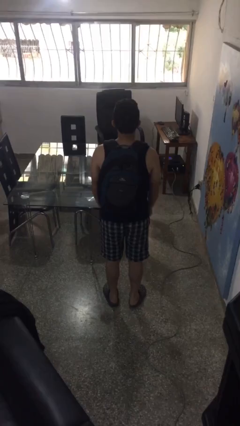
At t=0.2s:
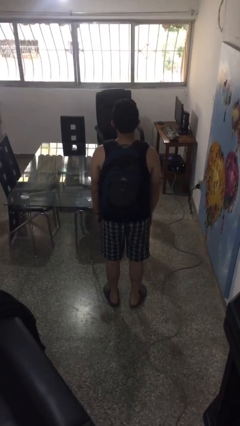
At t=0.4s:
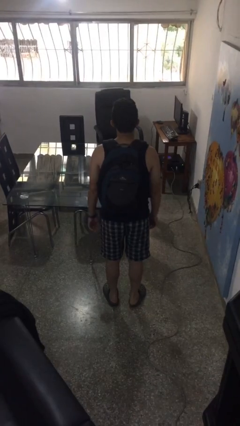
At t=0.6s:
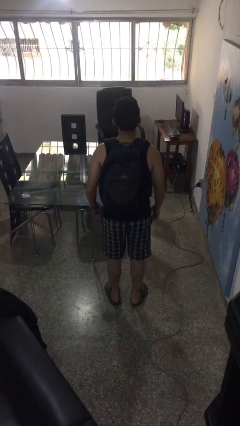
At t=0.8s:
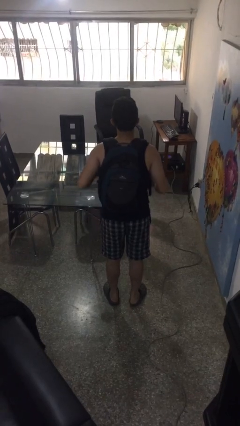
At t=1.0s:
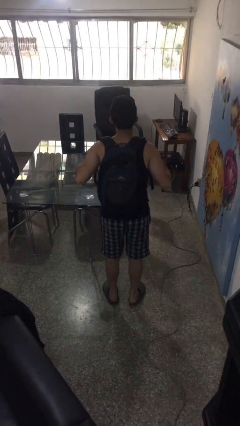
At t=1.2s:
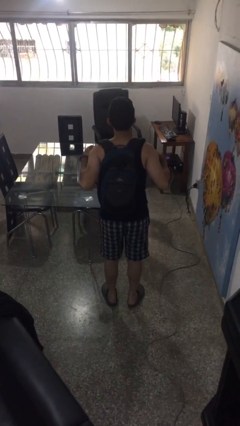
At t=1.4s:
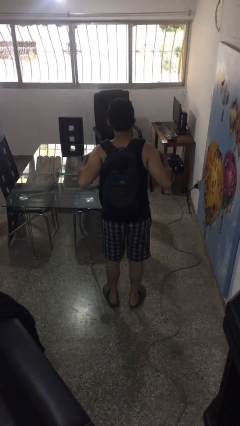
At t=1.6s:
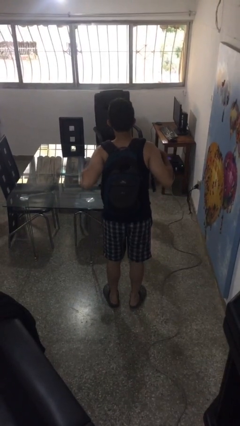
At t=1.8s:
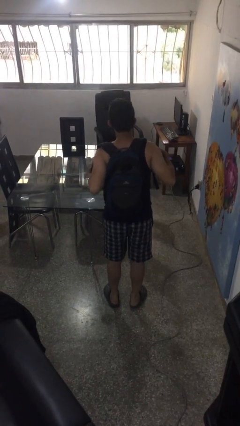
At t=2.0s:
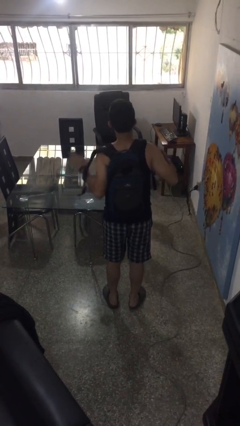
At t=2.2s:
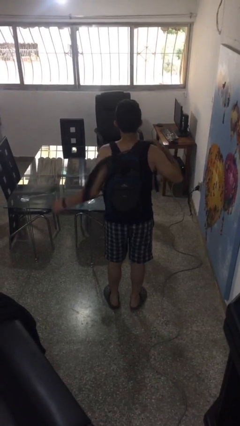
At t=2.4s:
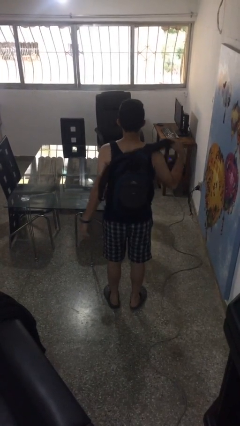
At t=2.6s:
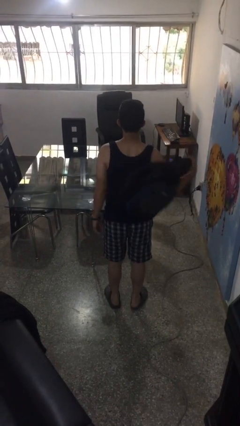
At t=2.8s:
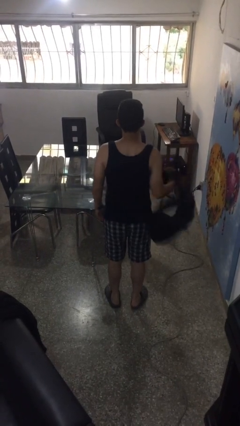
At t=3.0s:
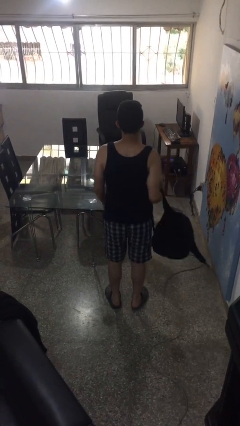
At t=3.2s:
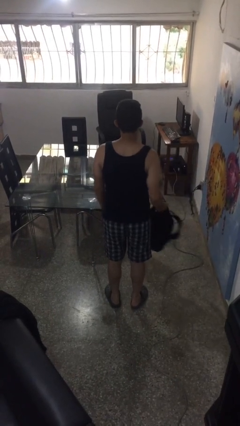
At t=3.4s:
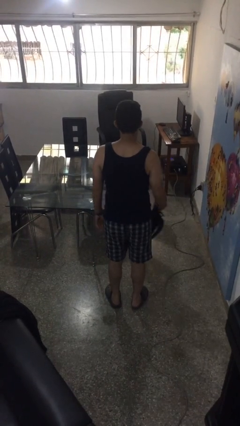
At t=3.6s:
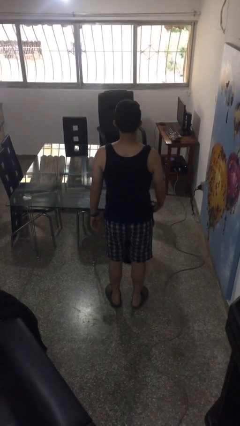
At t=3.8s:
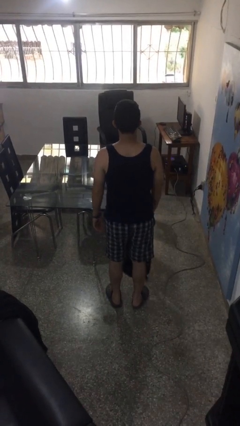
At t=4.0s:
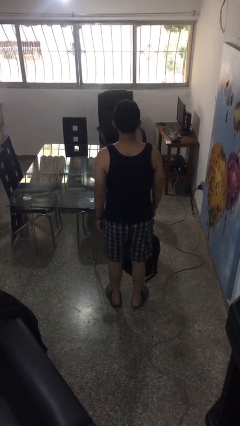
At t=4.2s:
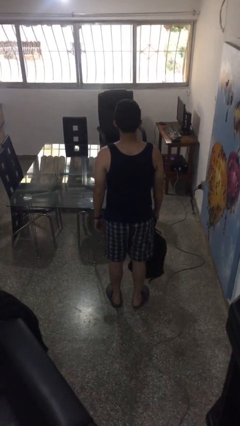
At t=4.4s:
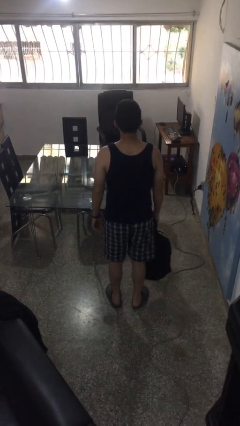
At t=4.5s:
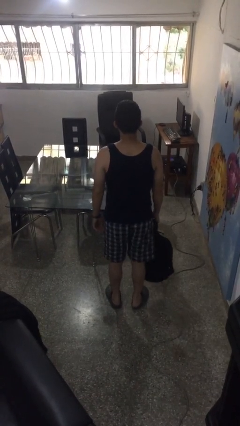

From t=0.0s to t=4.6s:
person takes off backpack

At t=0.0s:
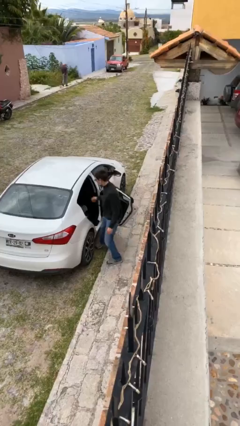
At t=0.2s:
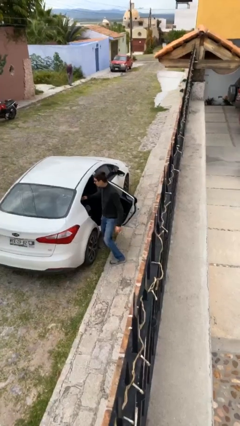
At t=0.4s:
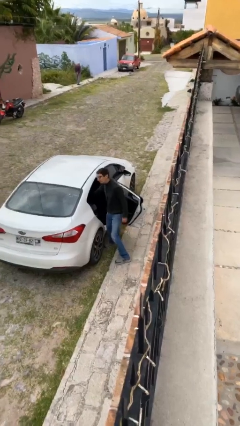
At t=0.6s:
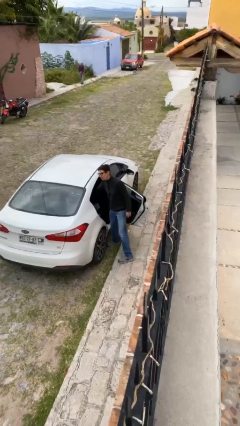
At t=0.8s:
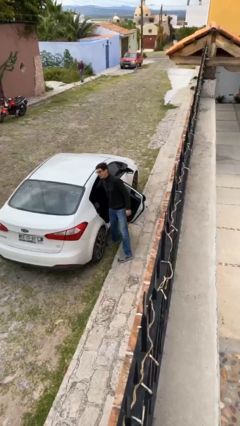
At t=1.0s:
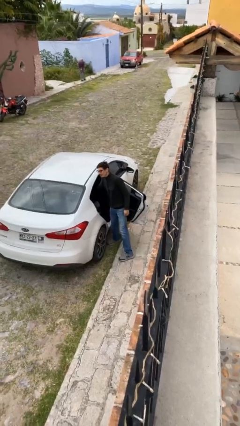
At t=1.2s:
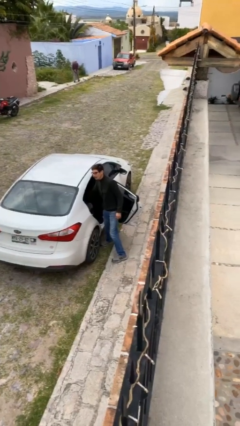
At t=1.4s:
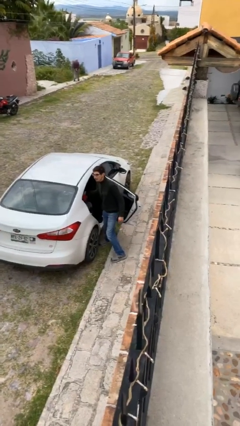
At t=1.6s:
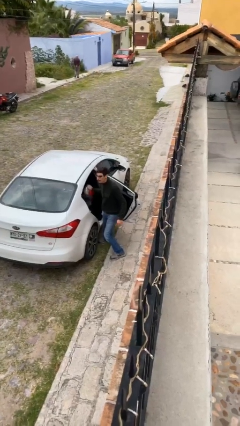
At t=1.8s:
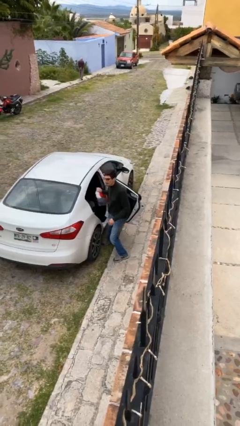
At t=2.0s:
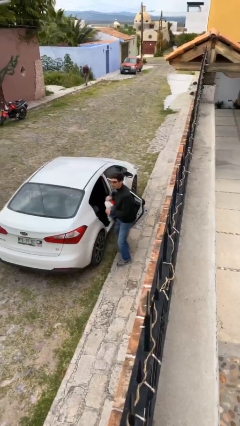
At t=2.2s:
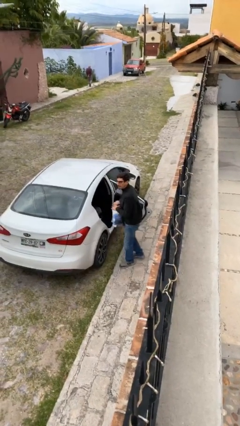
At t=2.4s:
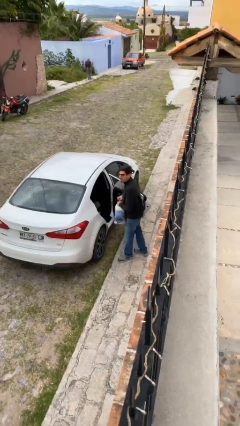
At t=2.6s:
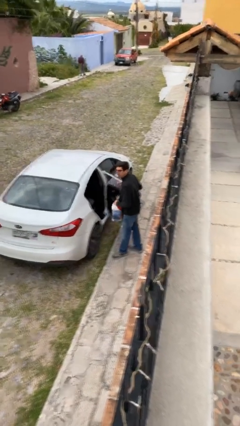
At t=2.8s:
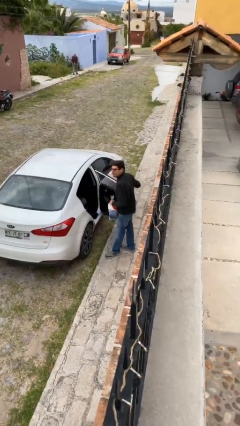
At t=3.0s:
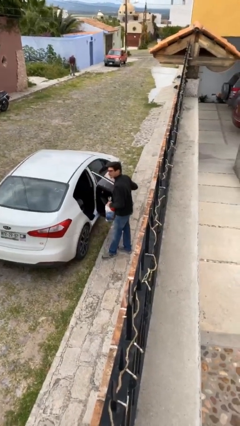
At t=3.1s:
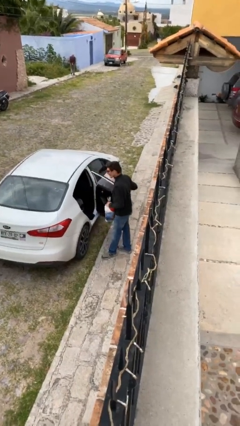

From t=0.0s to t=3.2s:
person unloads car

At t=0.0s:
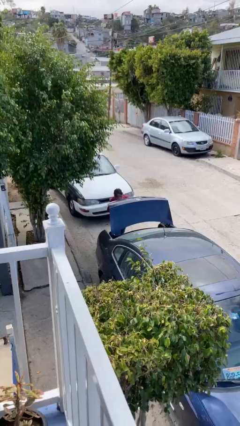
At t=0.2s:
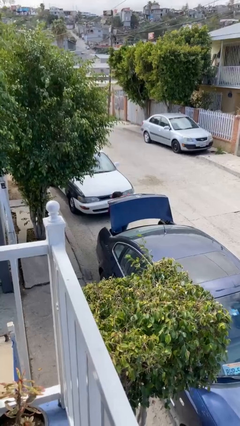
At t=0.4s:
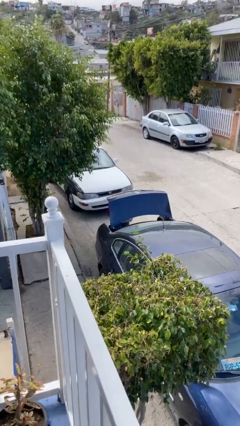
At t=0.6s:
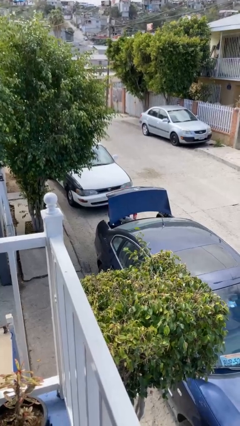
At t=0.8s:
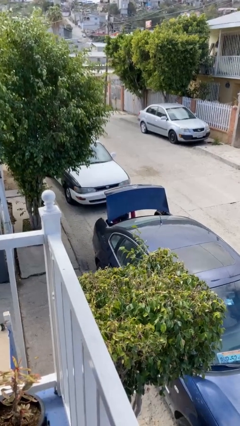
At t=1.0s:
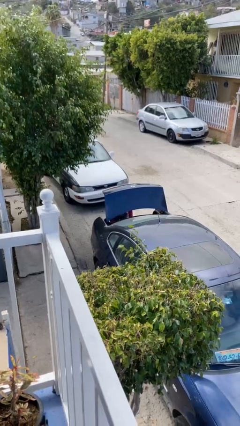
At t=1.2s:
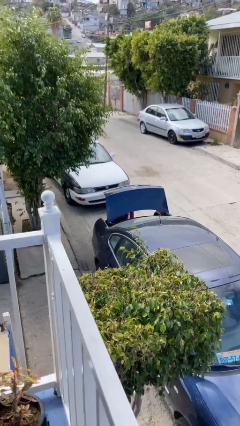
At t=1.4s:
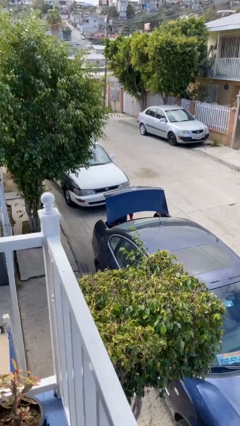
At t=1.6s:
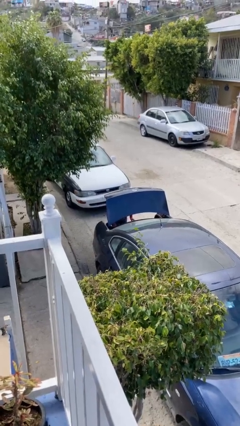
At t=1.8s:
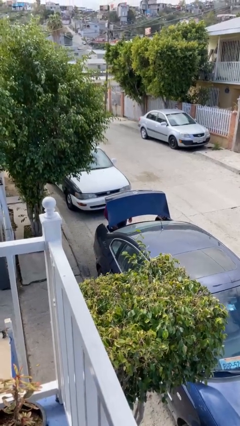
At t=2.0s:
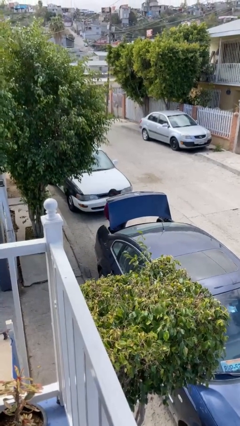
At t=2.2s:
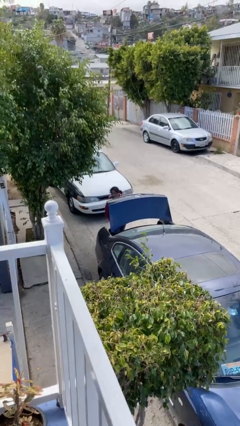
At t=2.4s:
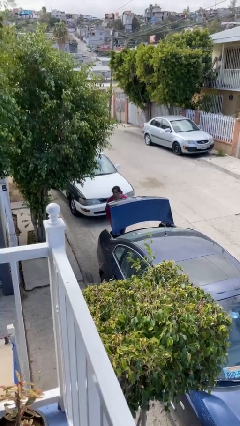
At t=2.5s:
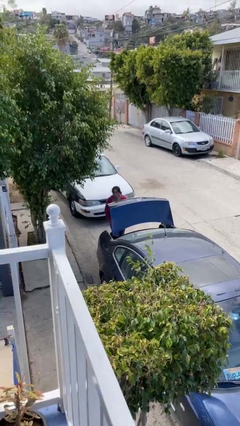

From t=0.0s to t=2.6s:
person loads car

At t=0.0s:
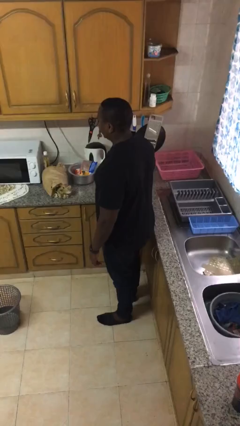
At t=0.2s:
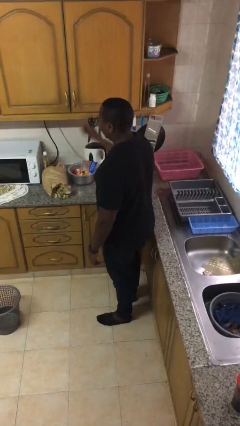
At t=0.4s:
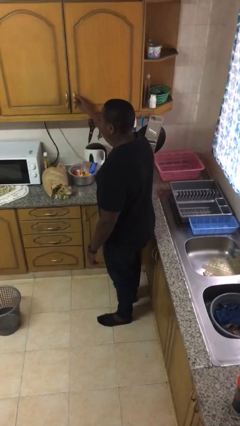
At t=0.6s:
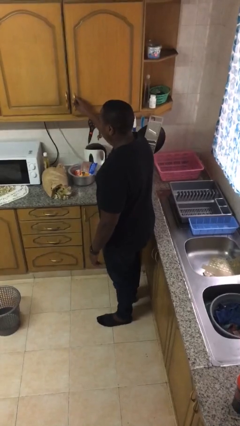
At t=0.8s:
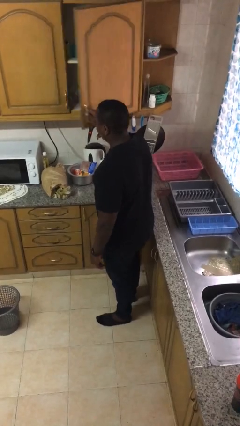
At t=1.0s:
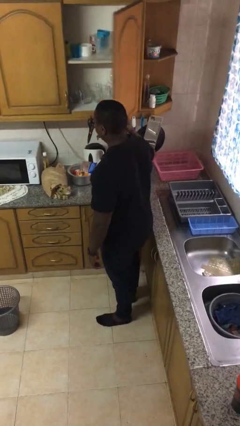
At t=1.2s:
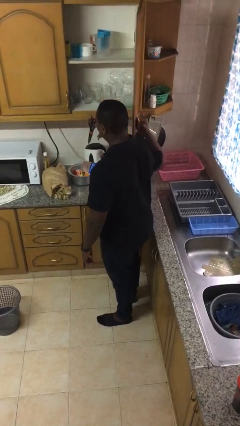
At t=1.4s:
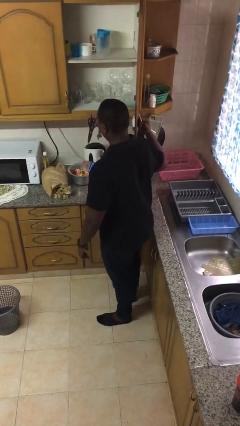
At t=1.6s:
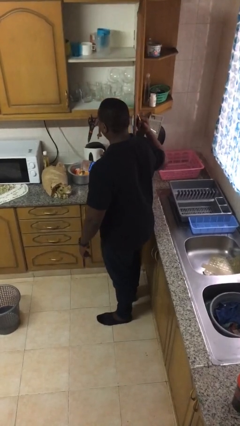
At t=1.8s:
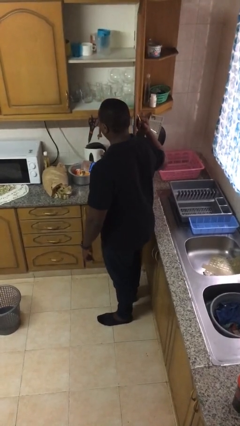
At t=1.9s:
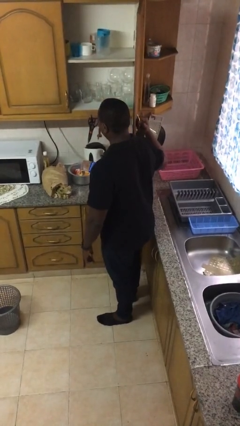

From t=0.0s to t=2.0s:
person opens cabinet

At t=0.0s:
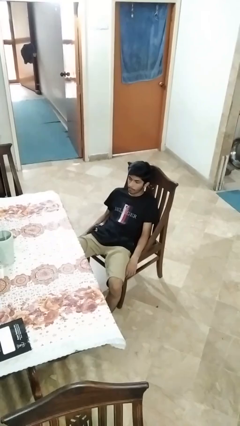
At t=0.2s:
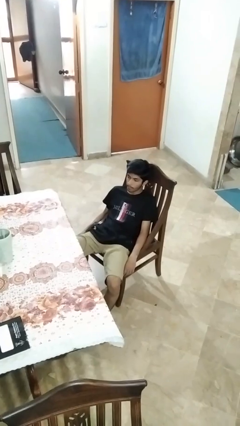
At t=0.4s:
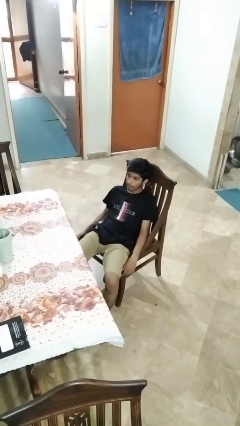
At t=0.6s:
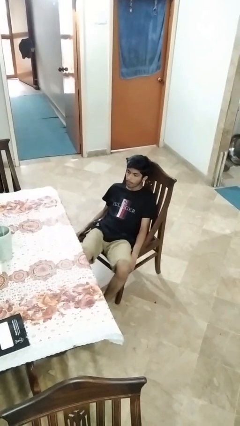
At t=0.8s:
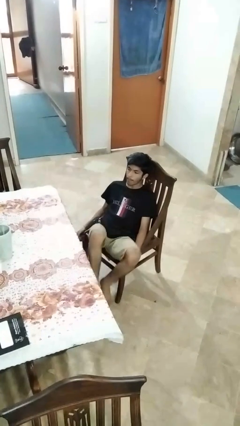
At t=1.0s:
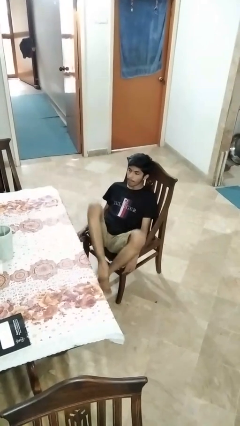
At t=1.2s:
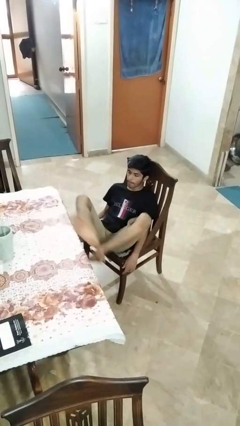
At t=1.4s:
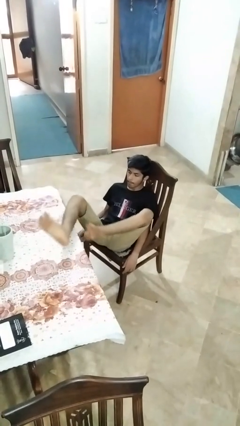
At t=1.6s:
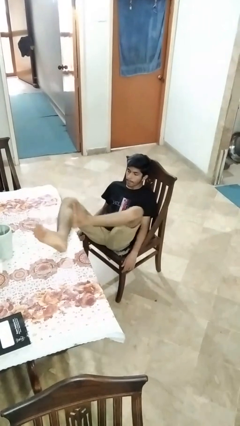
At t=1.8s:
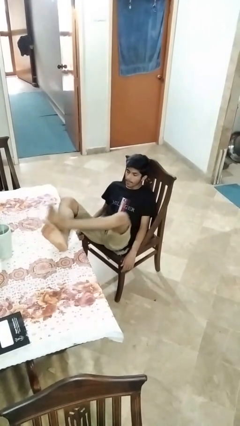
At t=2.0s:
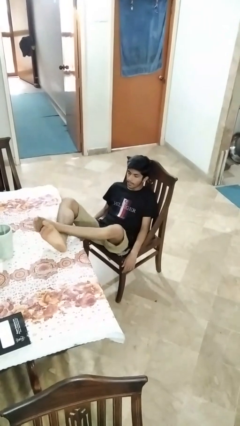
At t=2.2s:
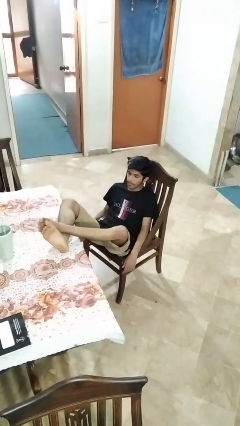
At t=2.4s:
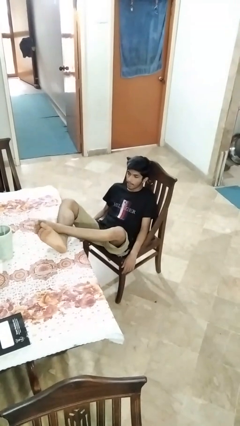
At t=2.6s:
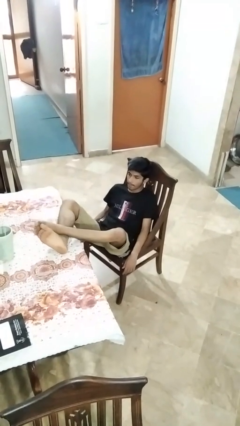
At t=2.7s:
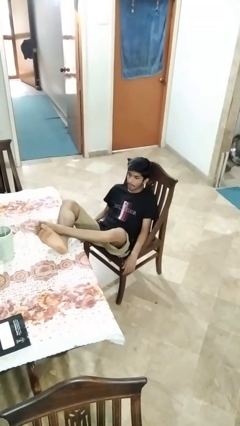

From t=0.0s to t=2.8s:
person puts feet up

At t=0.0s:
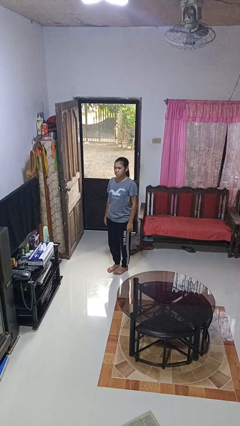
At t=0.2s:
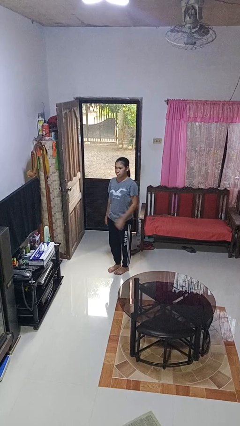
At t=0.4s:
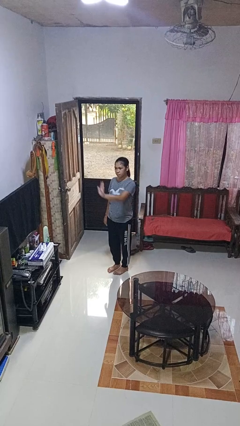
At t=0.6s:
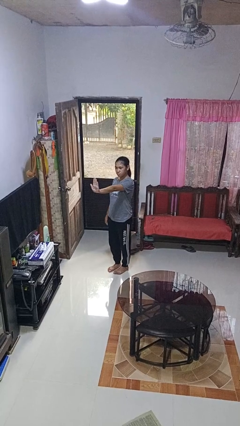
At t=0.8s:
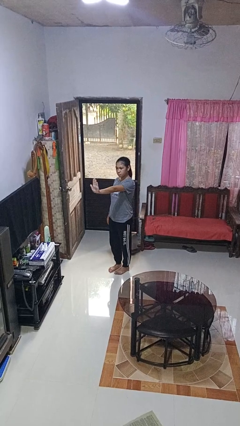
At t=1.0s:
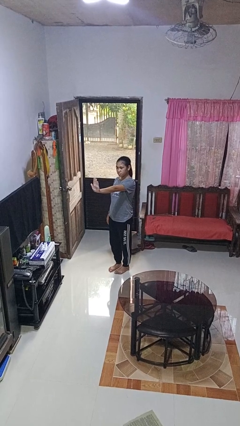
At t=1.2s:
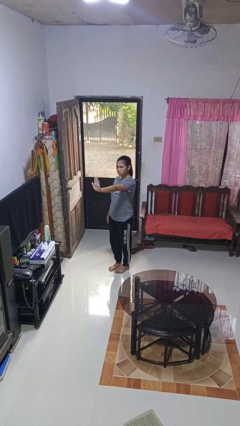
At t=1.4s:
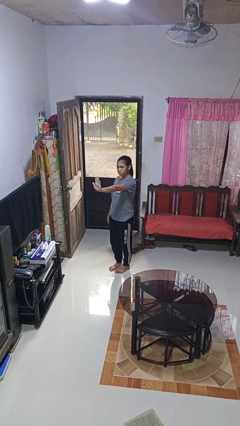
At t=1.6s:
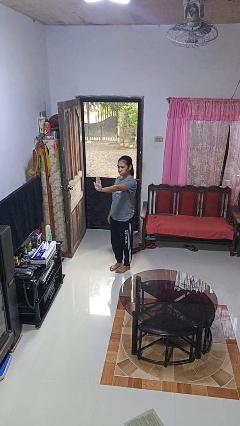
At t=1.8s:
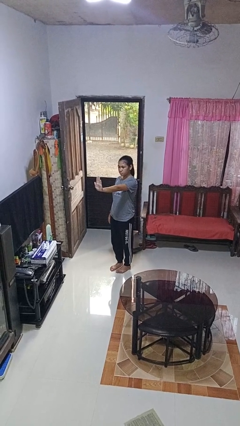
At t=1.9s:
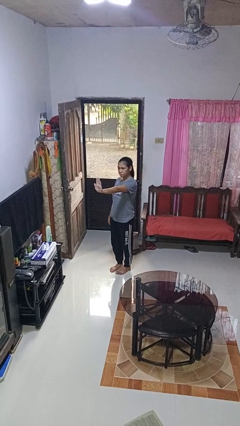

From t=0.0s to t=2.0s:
person gestures stop
